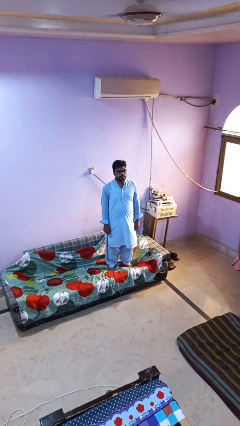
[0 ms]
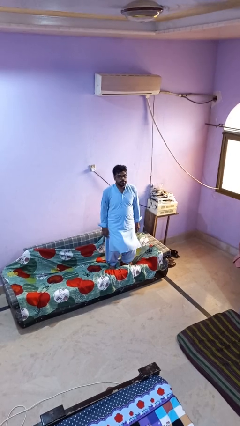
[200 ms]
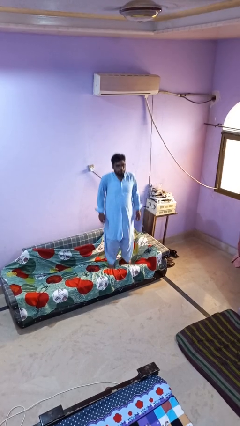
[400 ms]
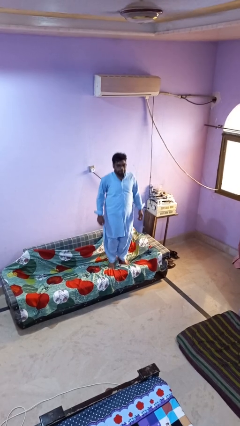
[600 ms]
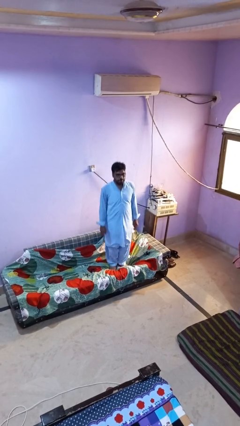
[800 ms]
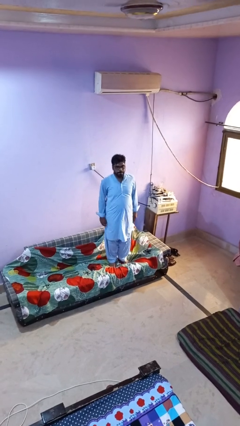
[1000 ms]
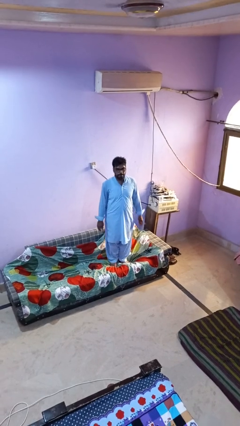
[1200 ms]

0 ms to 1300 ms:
person jumps on couch

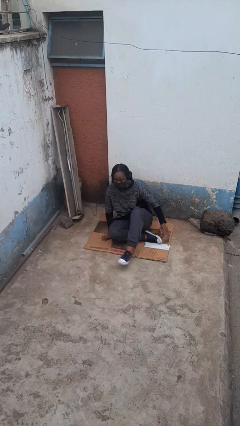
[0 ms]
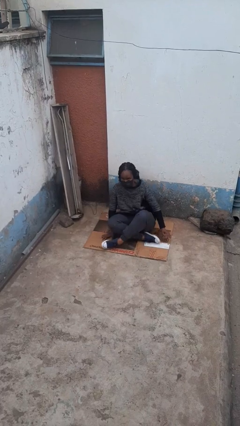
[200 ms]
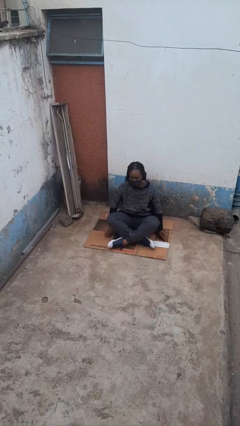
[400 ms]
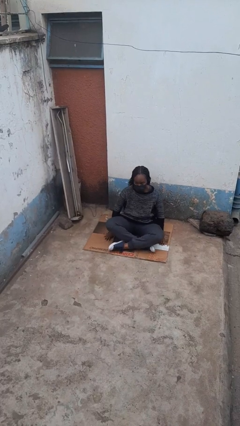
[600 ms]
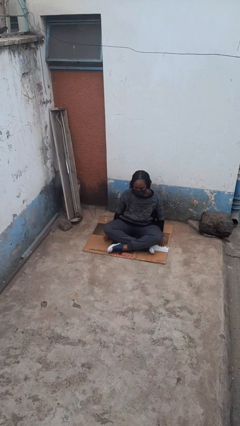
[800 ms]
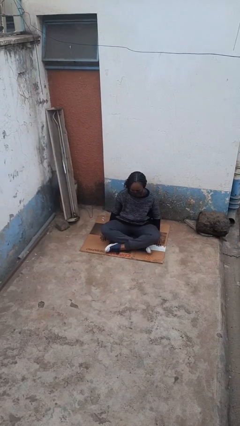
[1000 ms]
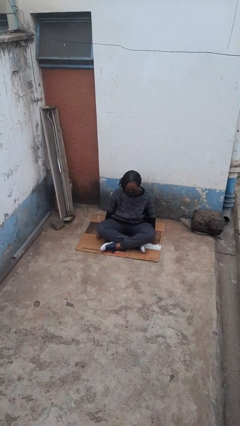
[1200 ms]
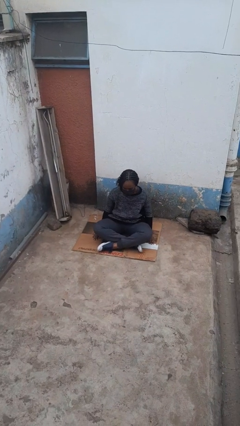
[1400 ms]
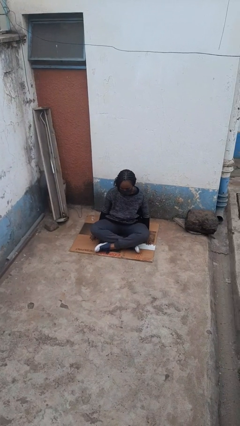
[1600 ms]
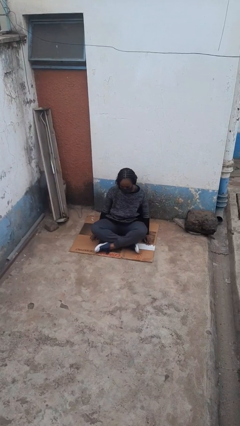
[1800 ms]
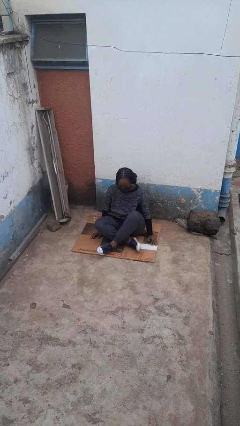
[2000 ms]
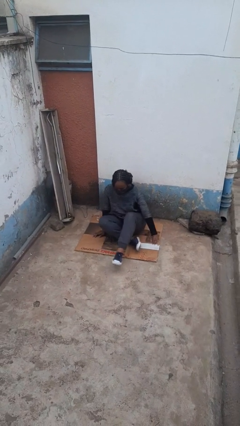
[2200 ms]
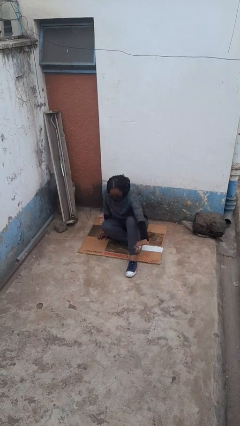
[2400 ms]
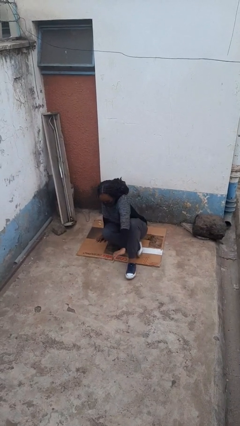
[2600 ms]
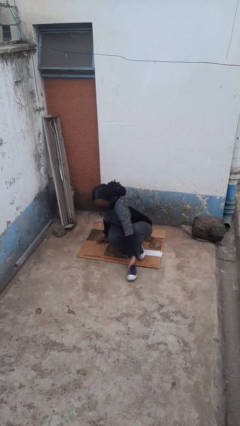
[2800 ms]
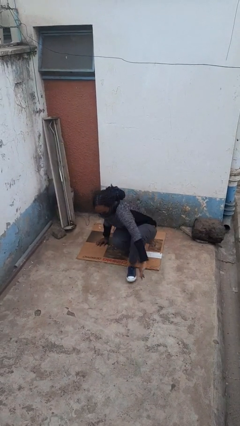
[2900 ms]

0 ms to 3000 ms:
person sits crisscross

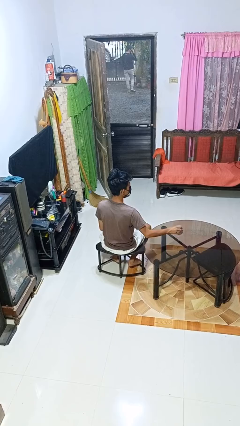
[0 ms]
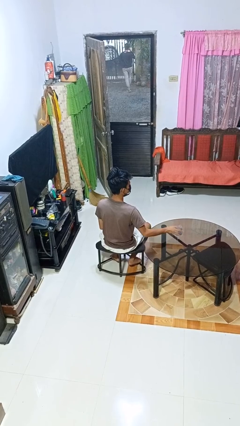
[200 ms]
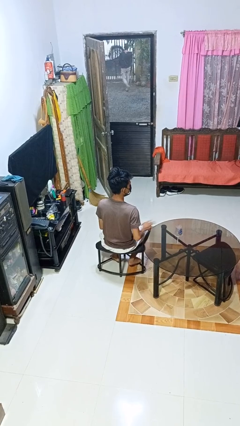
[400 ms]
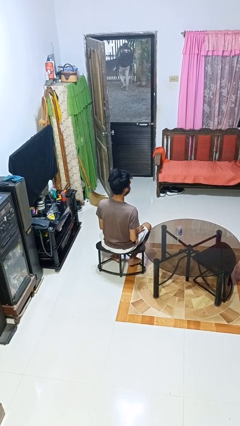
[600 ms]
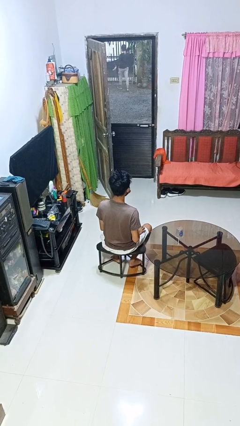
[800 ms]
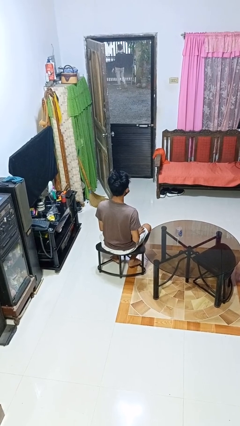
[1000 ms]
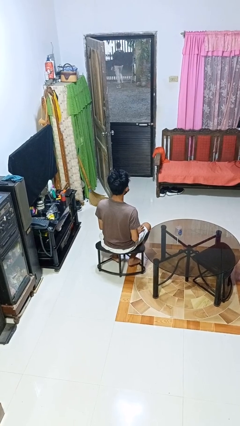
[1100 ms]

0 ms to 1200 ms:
person sets upright glass

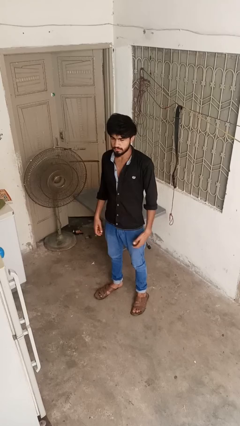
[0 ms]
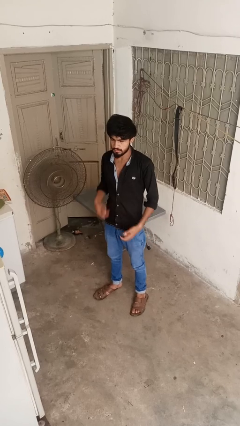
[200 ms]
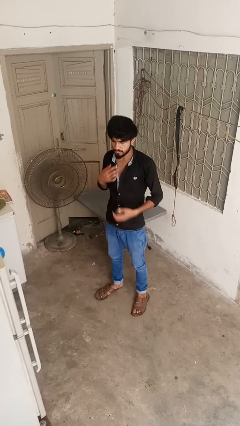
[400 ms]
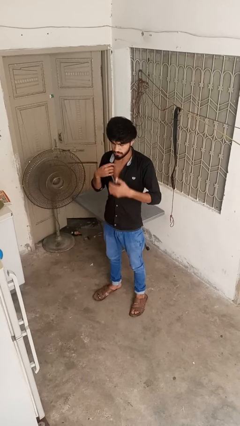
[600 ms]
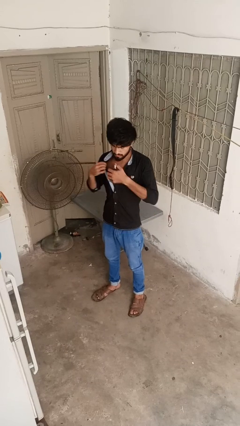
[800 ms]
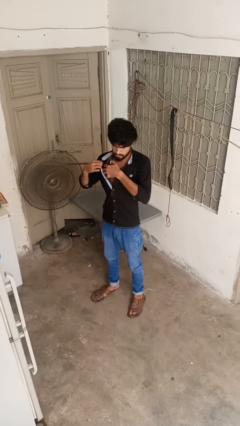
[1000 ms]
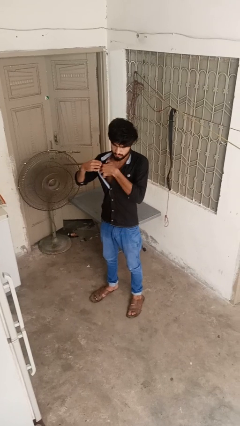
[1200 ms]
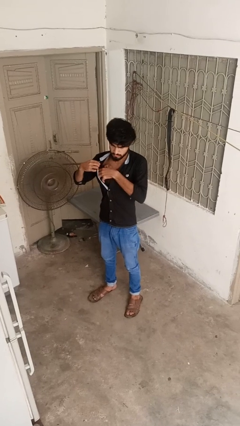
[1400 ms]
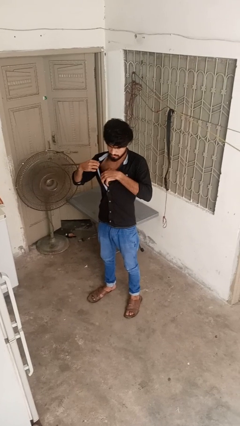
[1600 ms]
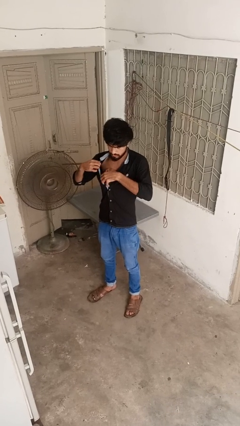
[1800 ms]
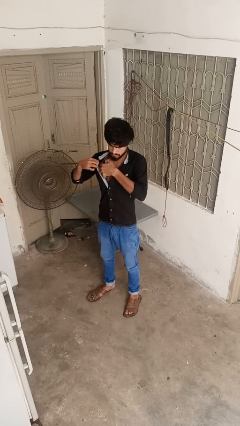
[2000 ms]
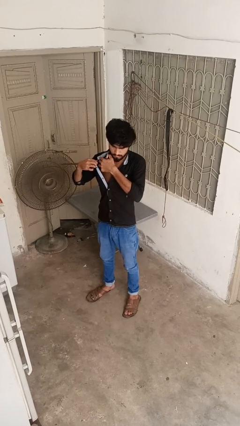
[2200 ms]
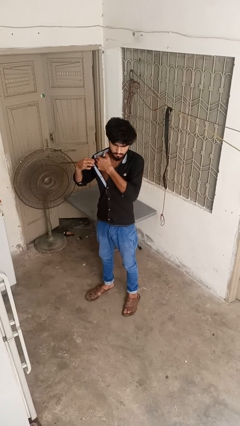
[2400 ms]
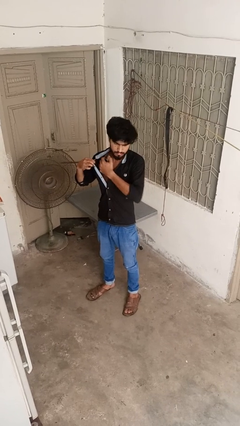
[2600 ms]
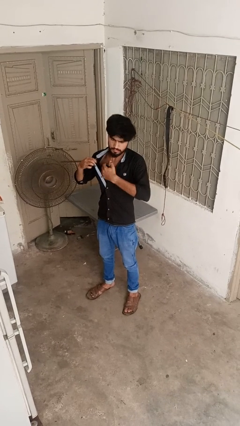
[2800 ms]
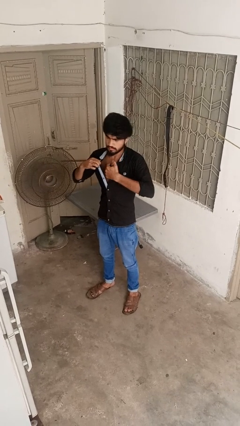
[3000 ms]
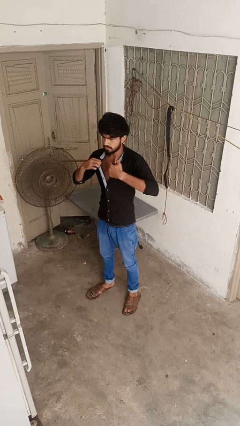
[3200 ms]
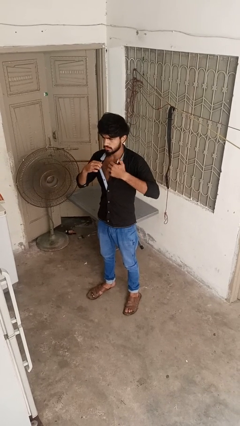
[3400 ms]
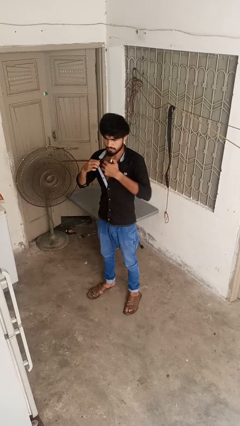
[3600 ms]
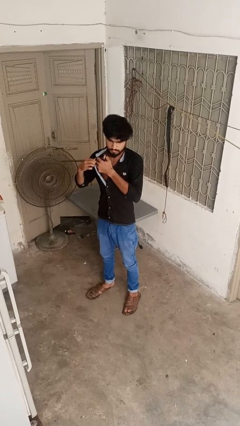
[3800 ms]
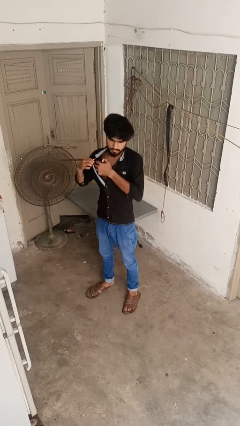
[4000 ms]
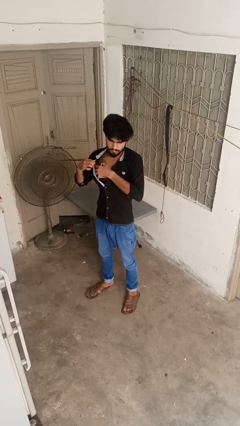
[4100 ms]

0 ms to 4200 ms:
person applies deodorant

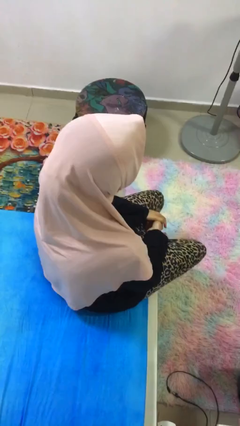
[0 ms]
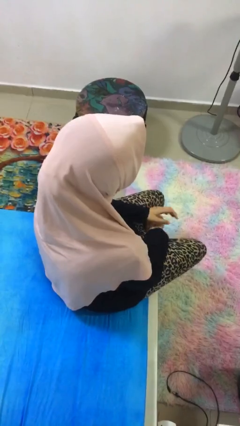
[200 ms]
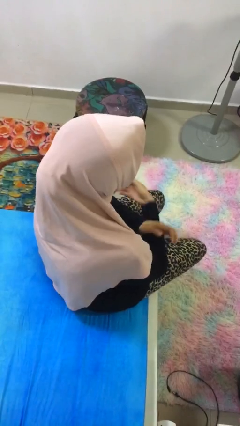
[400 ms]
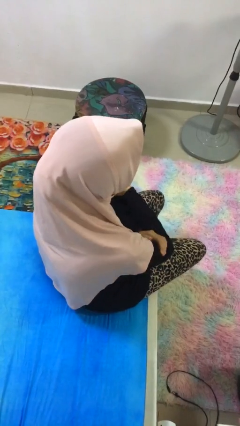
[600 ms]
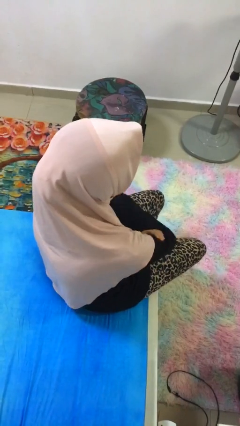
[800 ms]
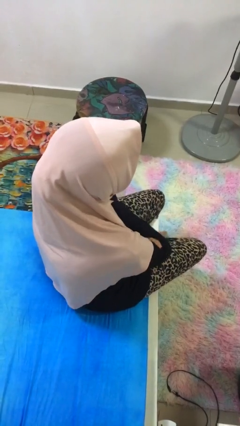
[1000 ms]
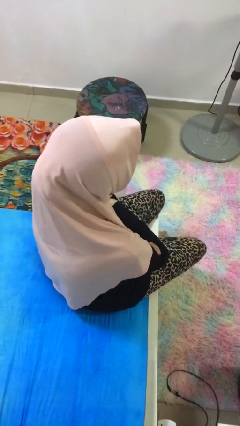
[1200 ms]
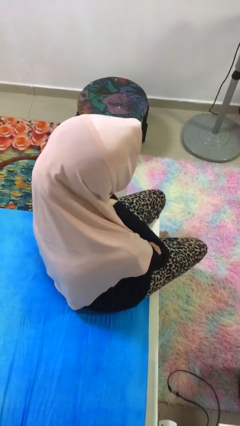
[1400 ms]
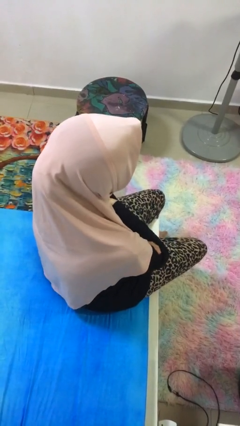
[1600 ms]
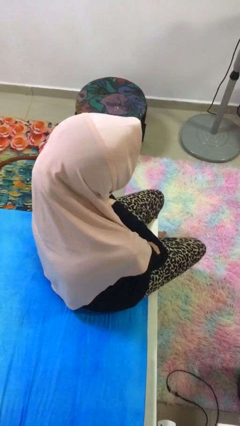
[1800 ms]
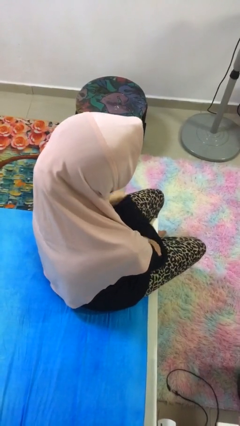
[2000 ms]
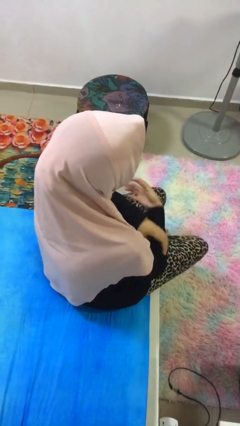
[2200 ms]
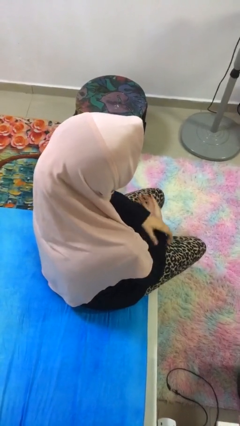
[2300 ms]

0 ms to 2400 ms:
person crosses arms

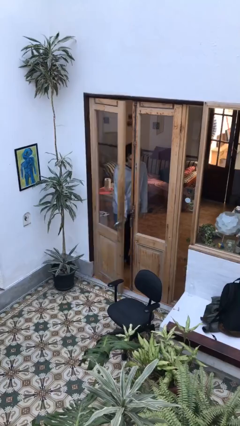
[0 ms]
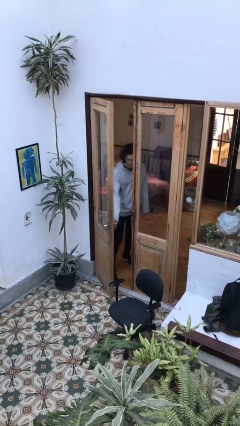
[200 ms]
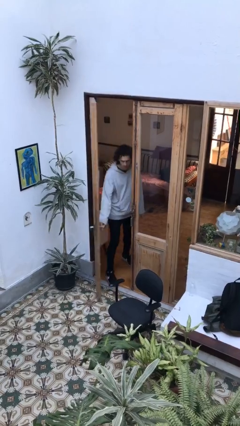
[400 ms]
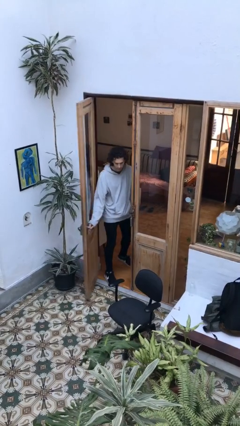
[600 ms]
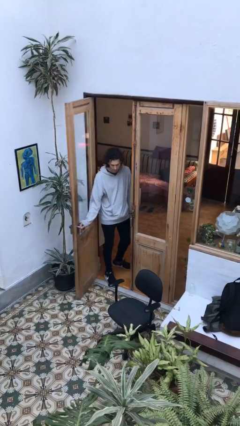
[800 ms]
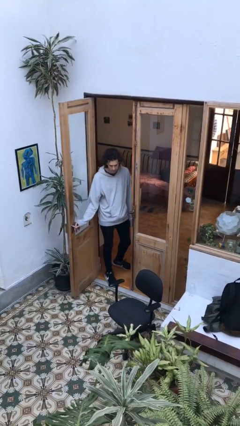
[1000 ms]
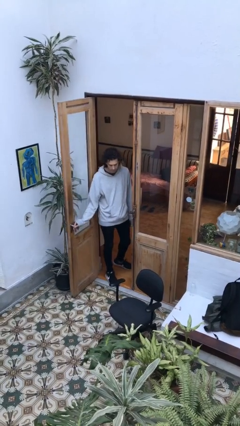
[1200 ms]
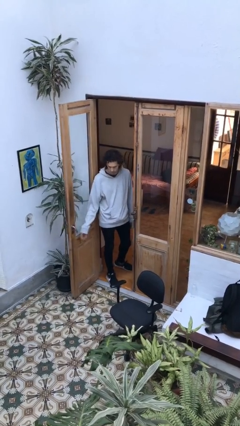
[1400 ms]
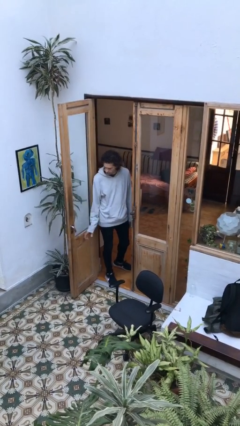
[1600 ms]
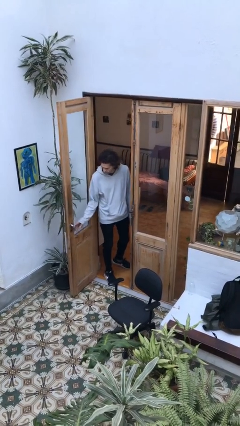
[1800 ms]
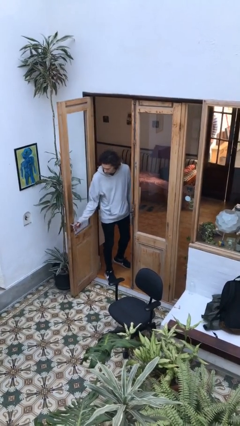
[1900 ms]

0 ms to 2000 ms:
person opens facility door

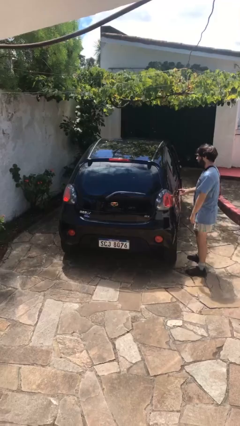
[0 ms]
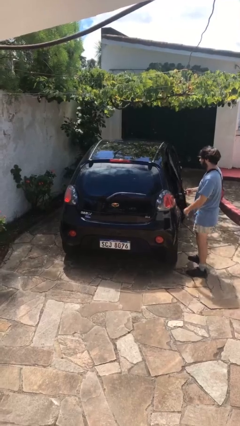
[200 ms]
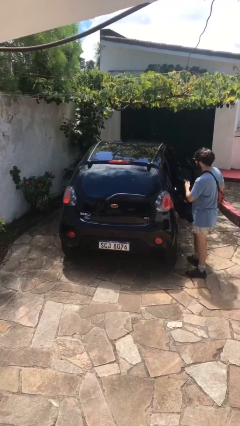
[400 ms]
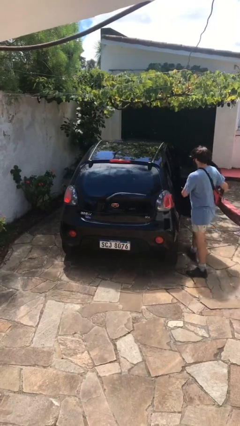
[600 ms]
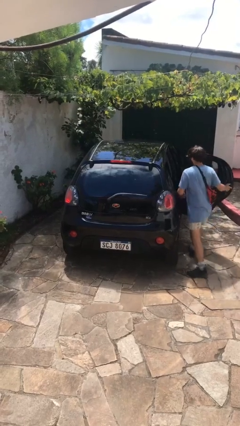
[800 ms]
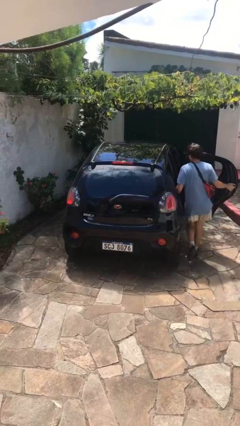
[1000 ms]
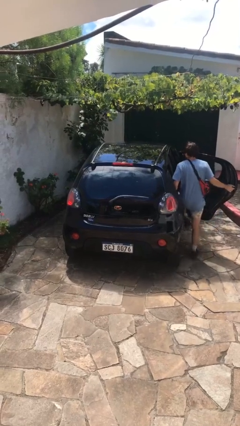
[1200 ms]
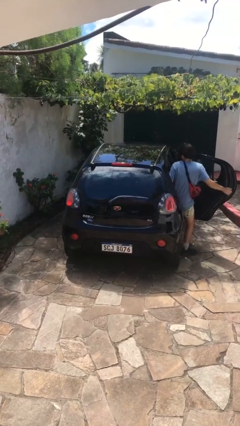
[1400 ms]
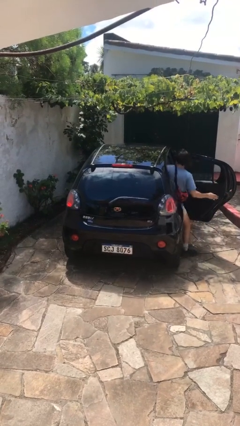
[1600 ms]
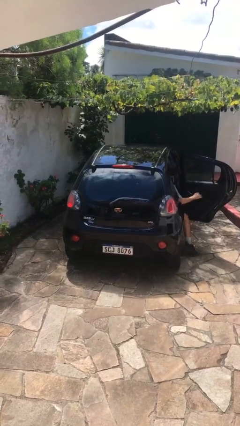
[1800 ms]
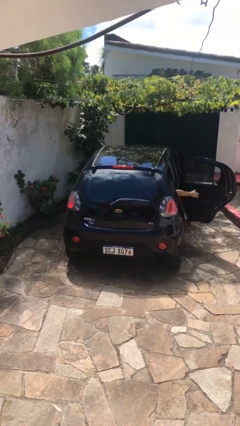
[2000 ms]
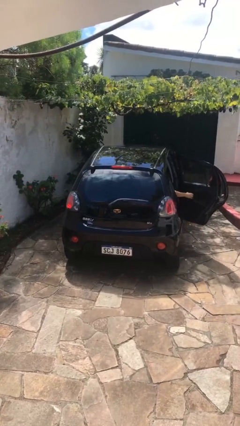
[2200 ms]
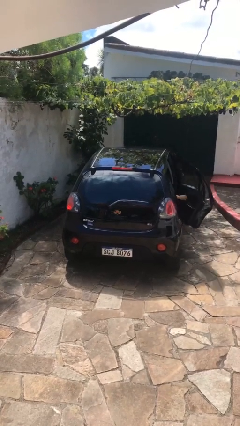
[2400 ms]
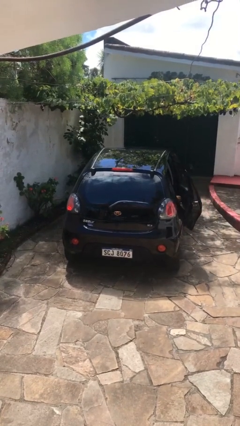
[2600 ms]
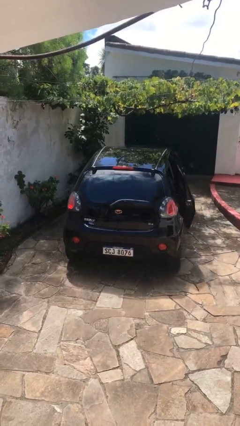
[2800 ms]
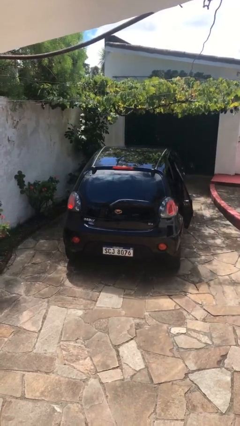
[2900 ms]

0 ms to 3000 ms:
car picks up person
